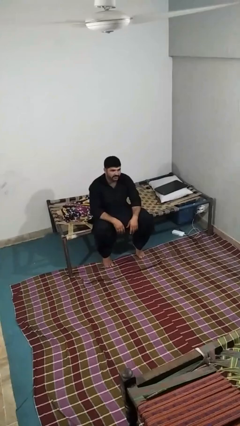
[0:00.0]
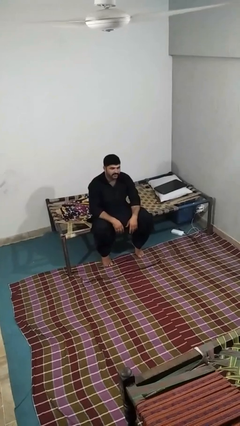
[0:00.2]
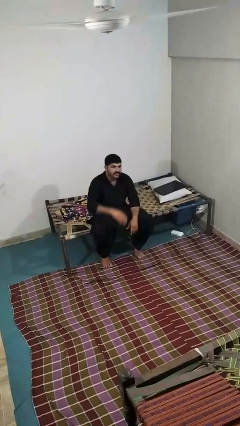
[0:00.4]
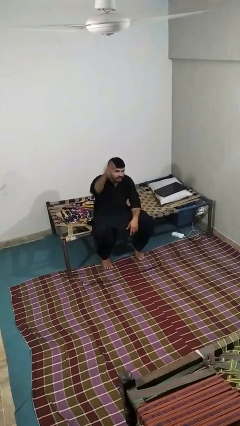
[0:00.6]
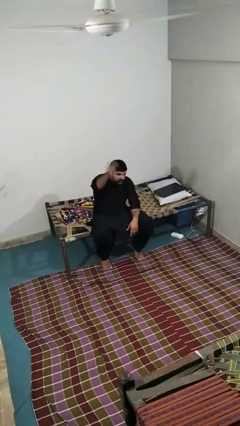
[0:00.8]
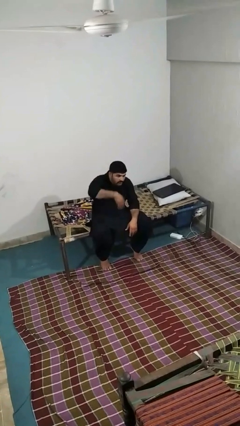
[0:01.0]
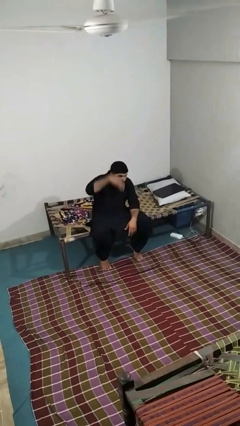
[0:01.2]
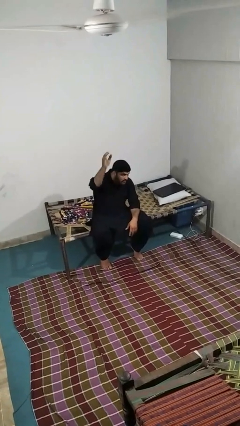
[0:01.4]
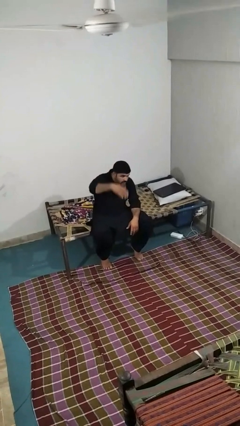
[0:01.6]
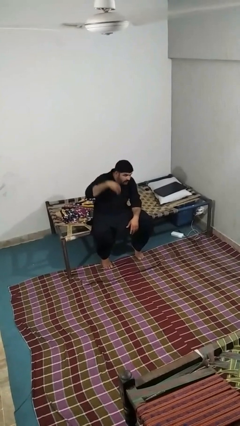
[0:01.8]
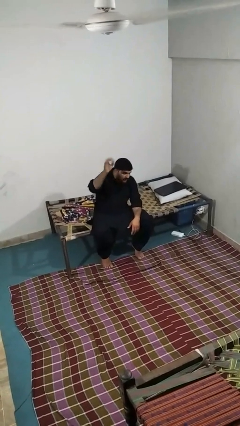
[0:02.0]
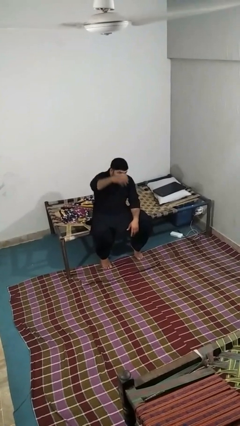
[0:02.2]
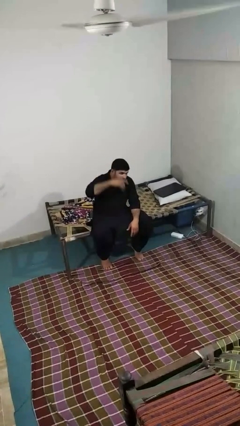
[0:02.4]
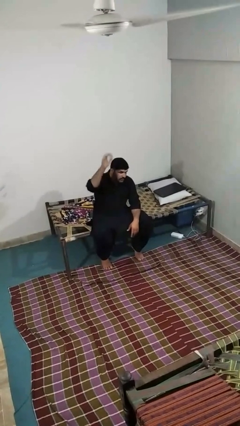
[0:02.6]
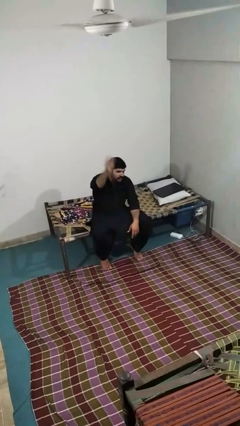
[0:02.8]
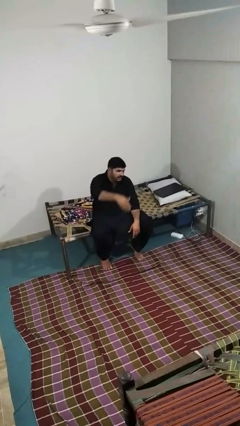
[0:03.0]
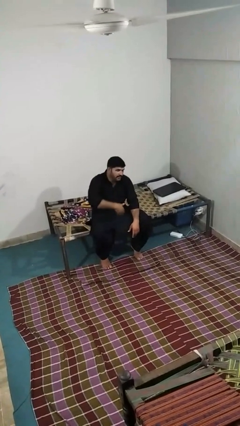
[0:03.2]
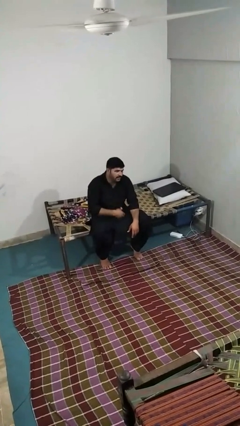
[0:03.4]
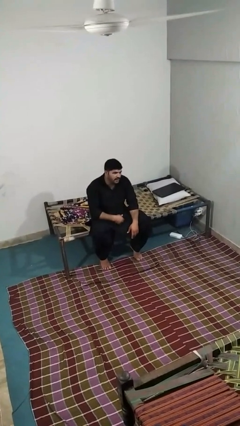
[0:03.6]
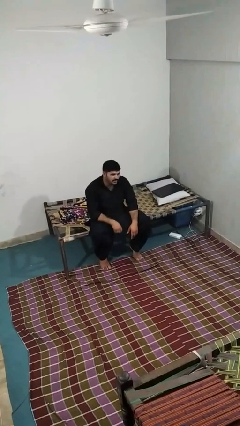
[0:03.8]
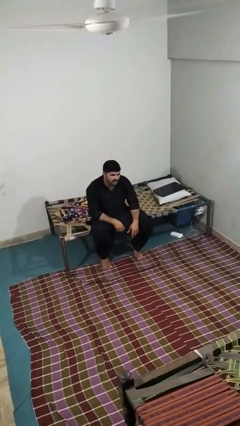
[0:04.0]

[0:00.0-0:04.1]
person gestures come here

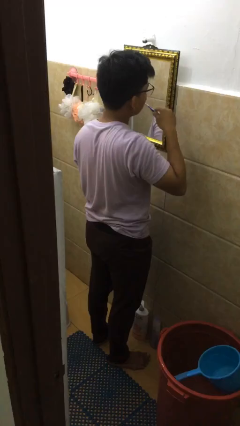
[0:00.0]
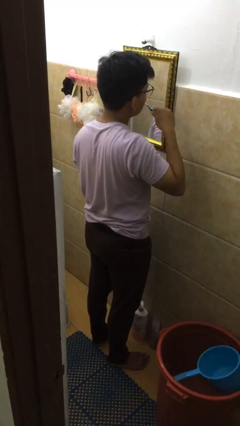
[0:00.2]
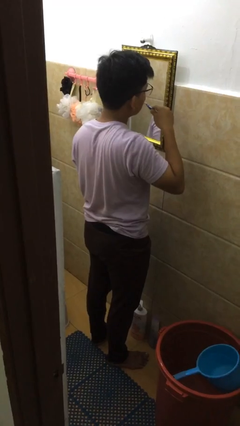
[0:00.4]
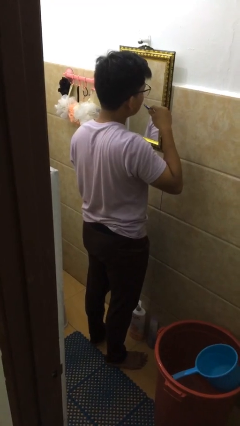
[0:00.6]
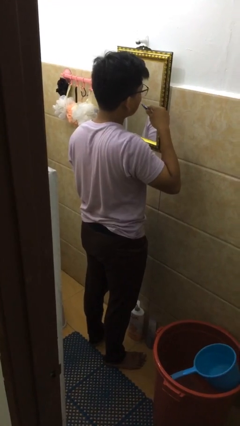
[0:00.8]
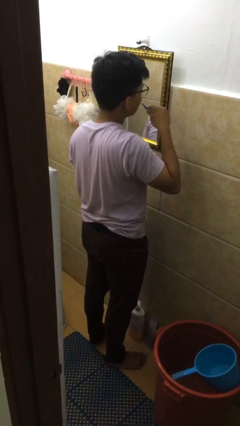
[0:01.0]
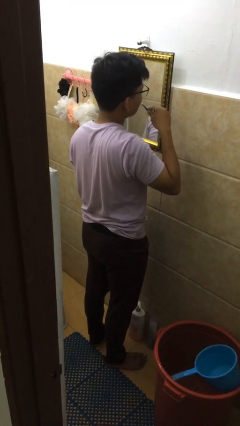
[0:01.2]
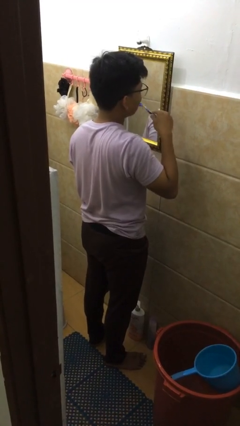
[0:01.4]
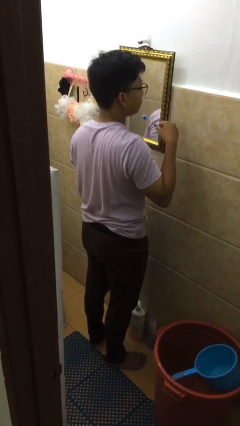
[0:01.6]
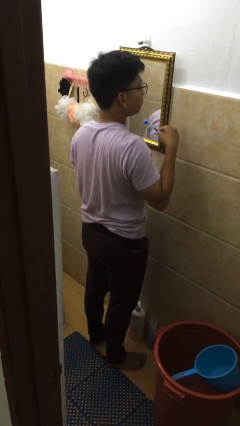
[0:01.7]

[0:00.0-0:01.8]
person brushes teeth

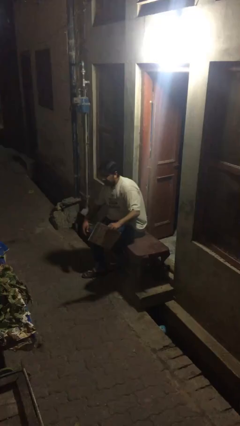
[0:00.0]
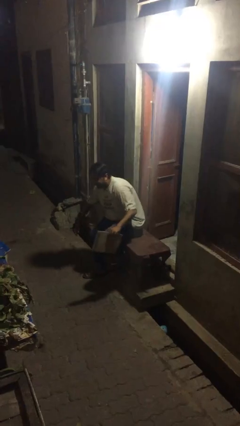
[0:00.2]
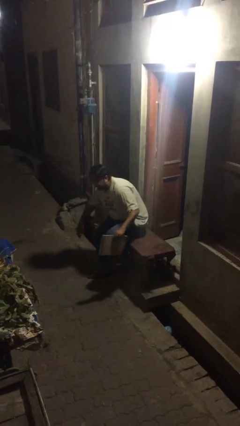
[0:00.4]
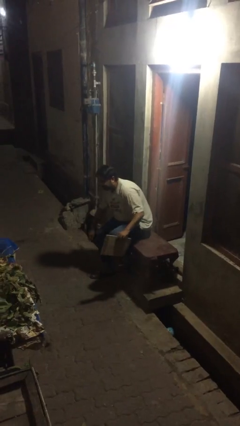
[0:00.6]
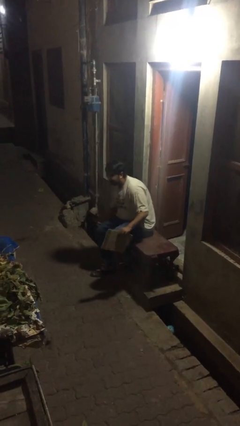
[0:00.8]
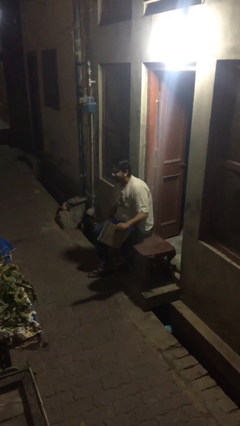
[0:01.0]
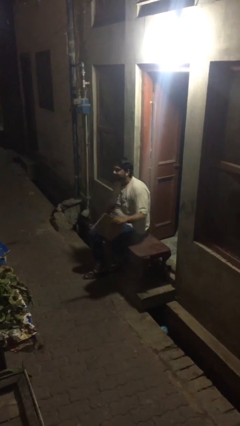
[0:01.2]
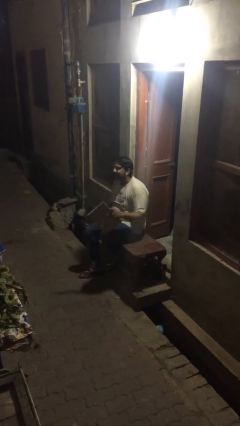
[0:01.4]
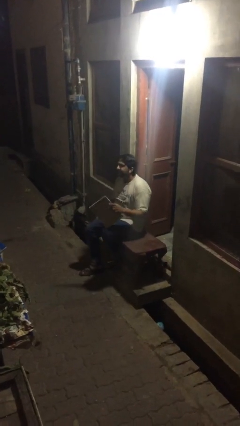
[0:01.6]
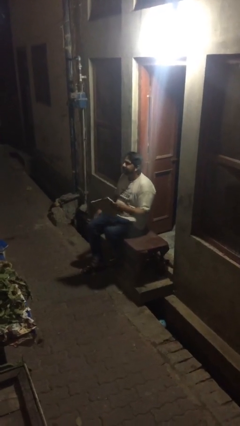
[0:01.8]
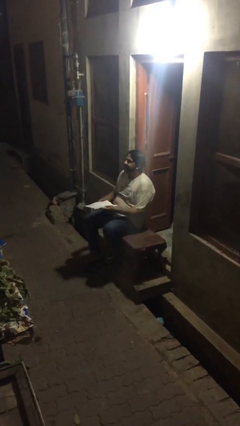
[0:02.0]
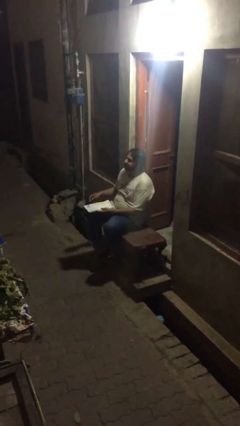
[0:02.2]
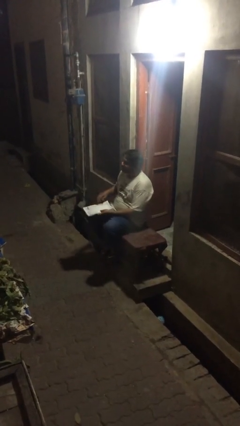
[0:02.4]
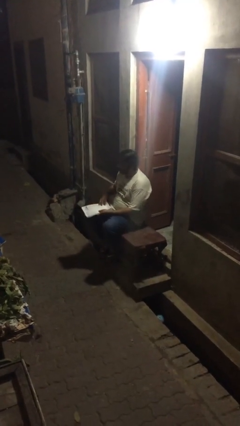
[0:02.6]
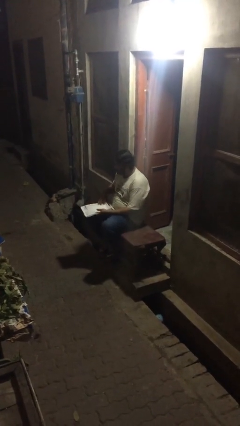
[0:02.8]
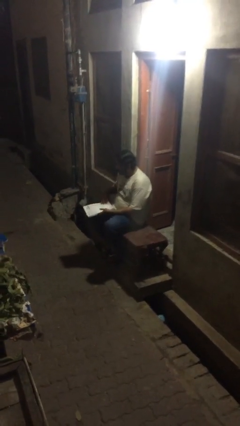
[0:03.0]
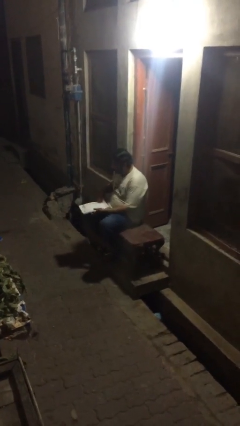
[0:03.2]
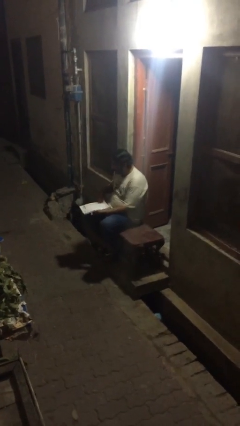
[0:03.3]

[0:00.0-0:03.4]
person sits down

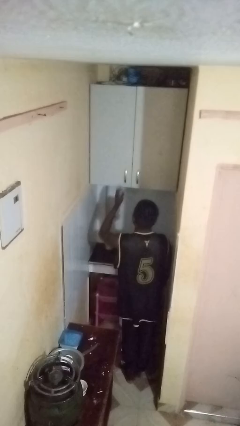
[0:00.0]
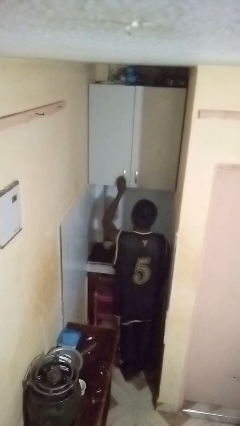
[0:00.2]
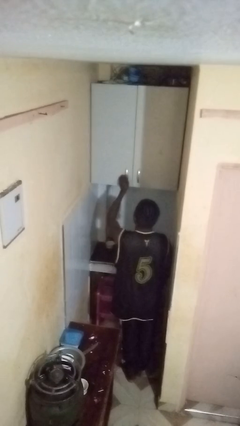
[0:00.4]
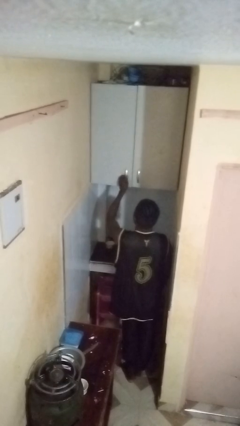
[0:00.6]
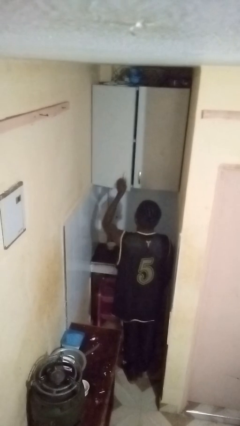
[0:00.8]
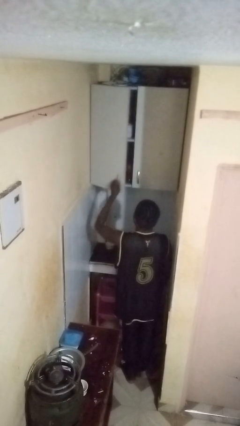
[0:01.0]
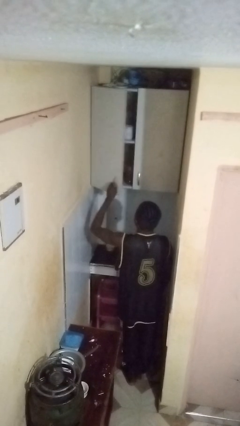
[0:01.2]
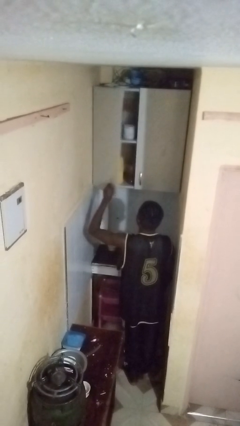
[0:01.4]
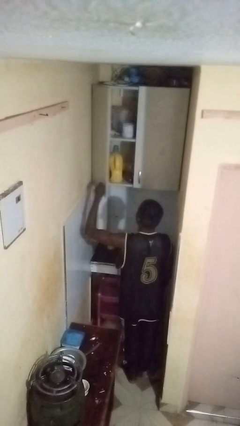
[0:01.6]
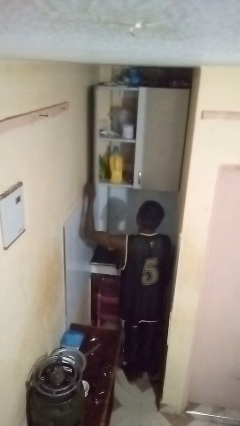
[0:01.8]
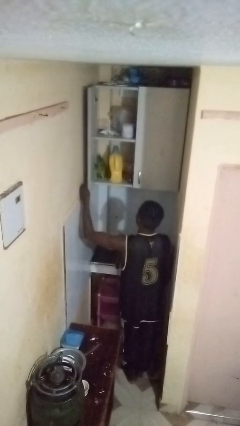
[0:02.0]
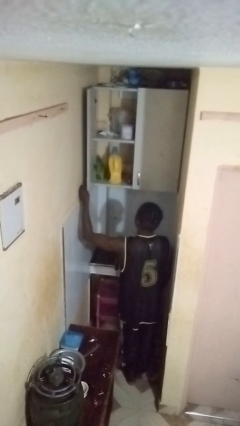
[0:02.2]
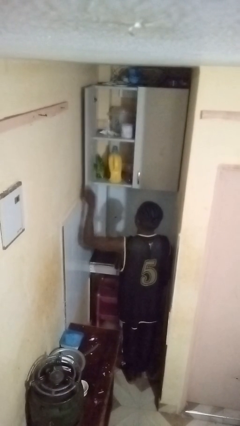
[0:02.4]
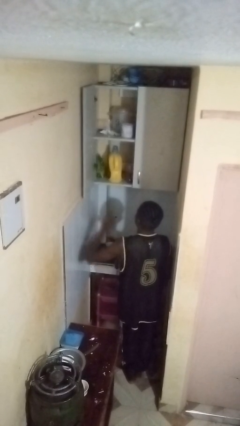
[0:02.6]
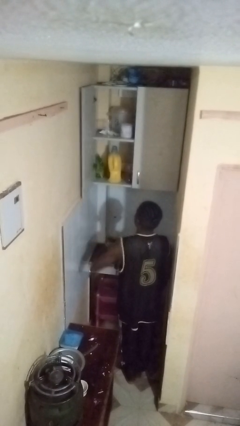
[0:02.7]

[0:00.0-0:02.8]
person opens cabinet

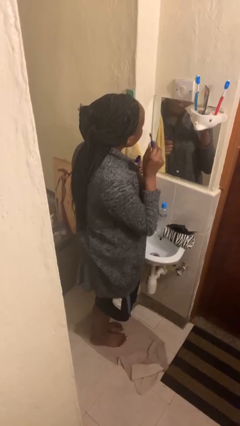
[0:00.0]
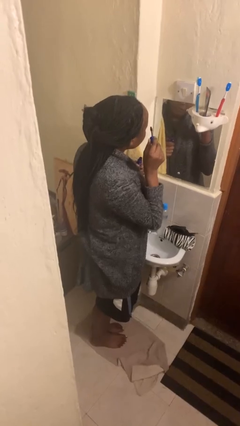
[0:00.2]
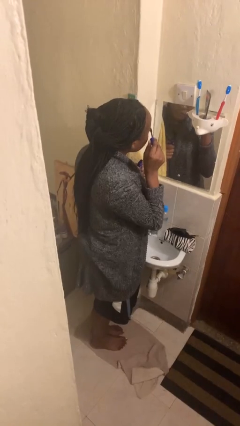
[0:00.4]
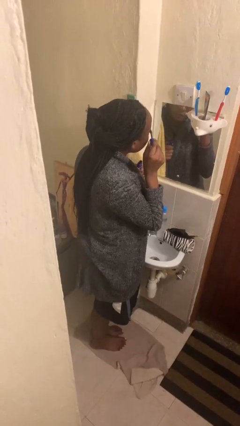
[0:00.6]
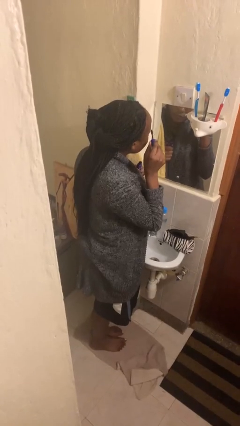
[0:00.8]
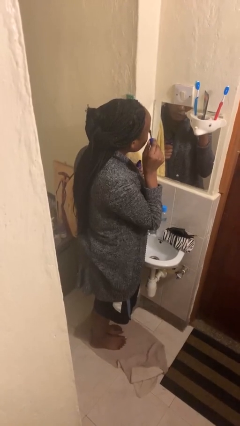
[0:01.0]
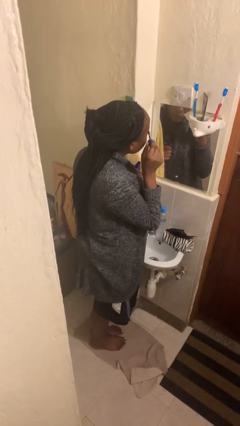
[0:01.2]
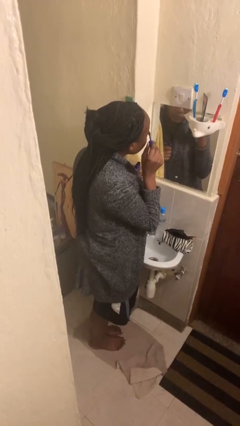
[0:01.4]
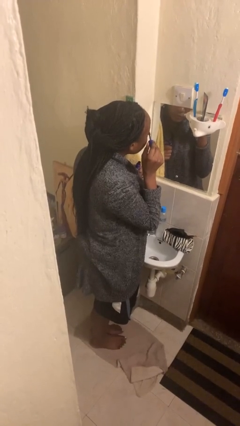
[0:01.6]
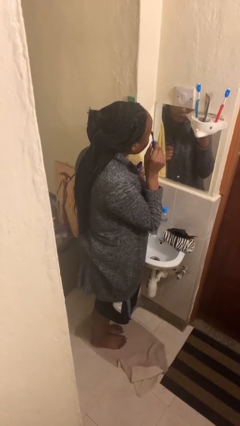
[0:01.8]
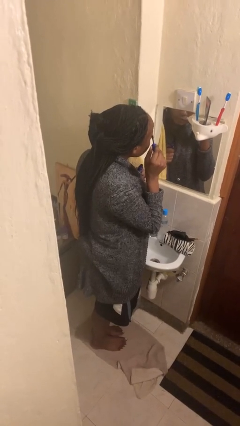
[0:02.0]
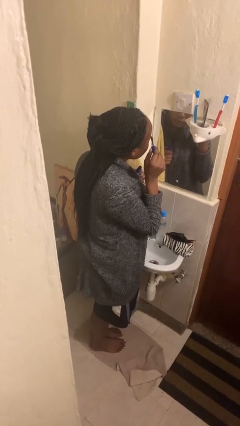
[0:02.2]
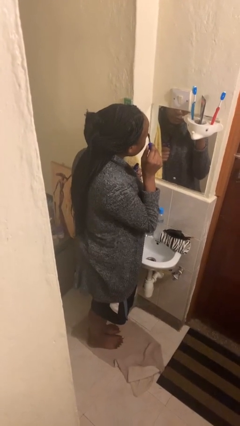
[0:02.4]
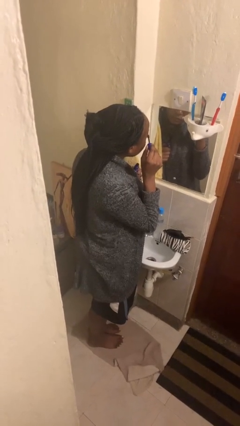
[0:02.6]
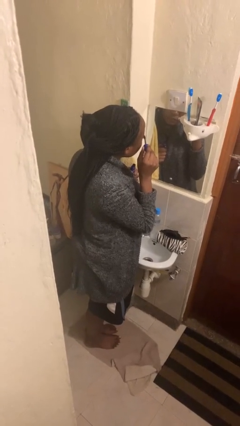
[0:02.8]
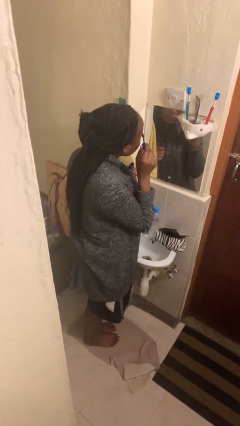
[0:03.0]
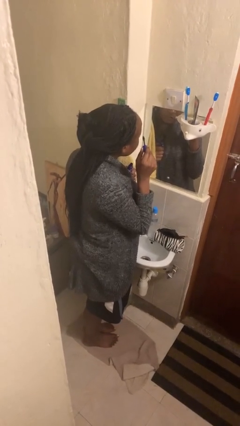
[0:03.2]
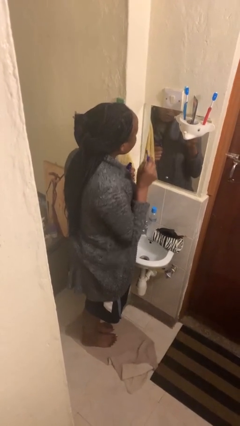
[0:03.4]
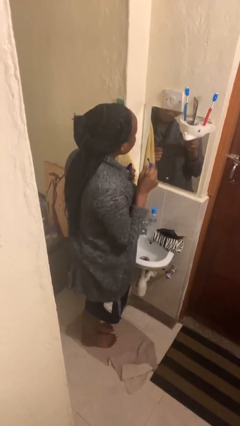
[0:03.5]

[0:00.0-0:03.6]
person applies eye makeup

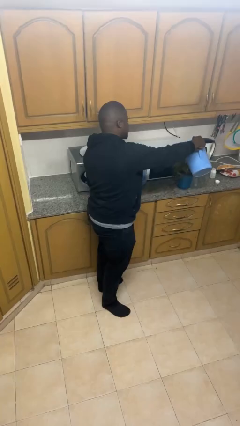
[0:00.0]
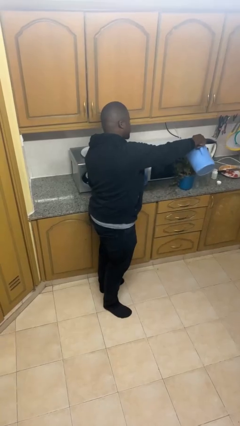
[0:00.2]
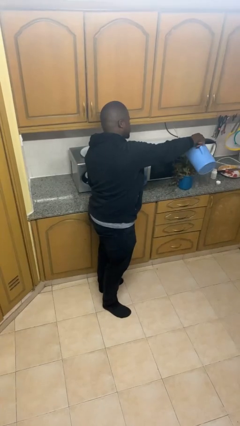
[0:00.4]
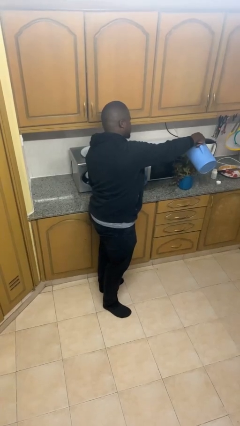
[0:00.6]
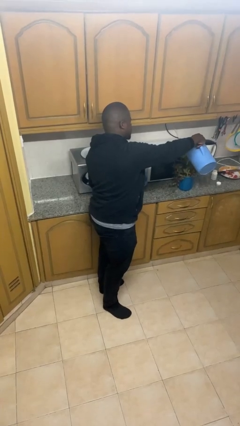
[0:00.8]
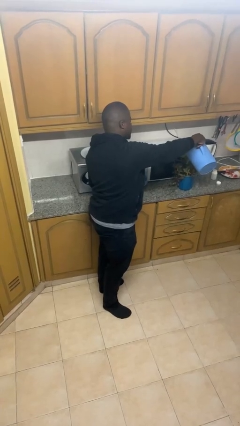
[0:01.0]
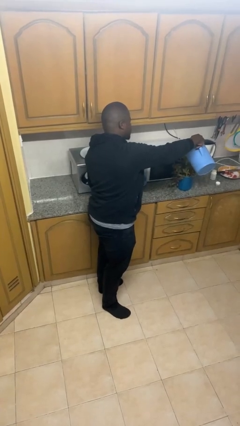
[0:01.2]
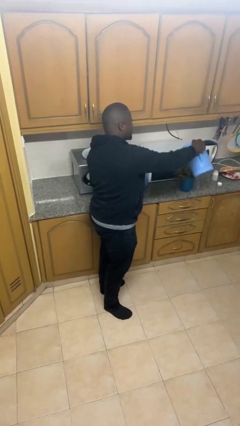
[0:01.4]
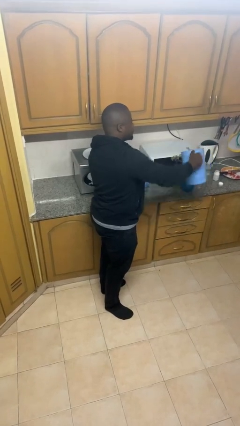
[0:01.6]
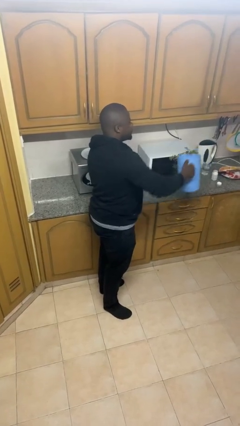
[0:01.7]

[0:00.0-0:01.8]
person waters houseplant
